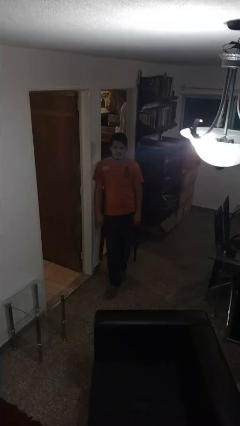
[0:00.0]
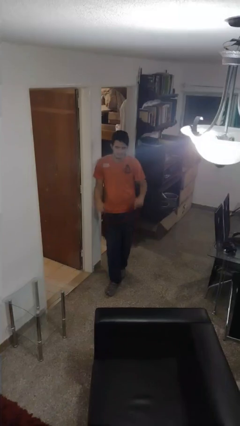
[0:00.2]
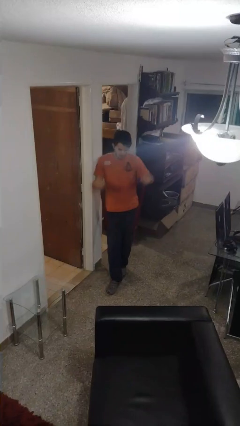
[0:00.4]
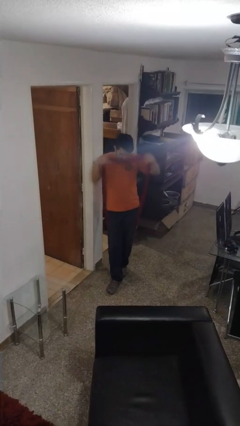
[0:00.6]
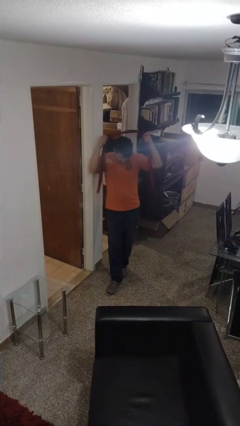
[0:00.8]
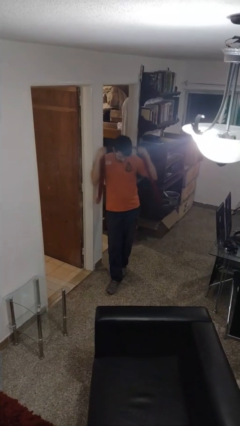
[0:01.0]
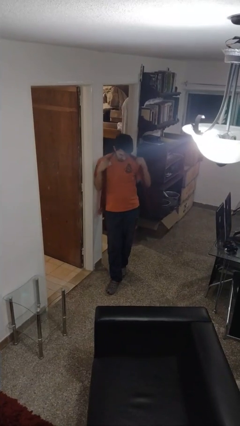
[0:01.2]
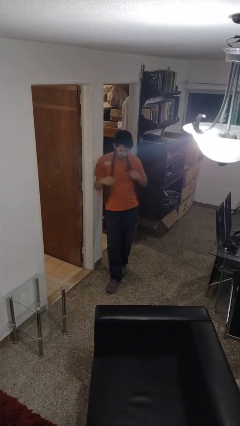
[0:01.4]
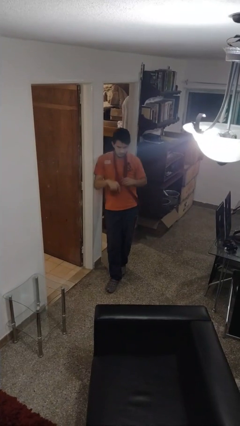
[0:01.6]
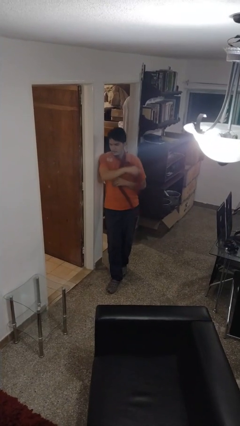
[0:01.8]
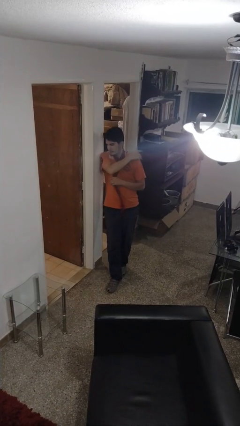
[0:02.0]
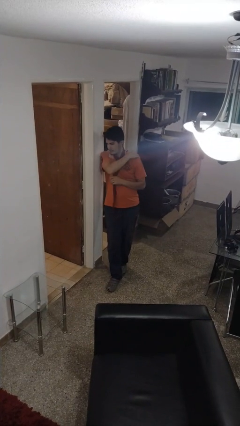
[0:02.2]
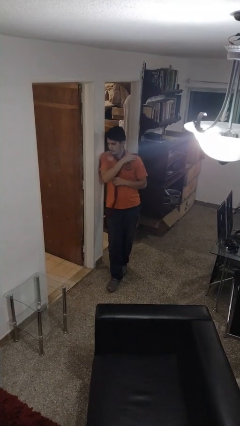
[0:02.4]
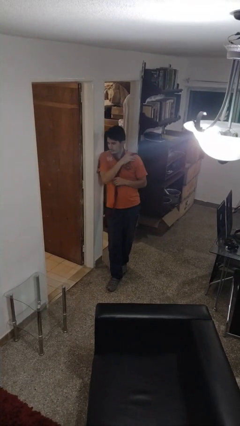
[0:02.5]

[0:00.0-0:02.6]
person puts on scarf

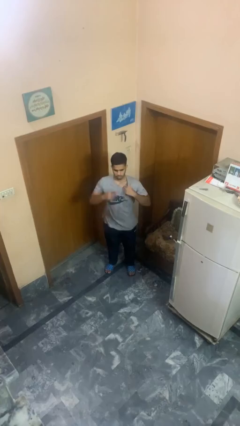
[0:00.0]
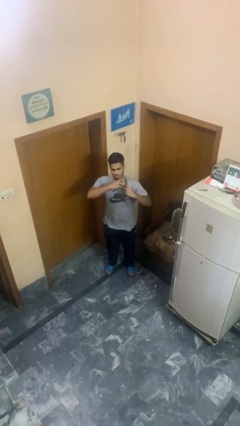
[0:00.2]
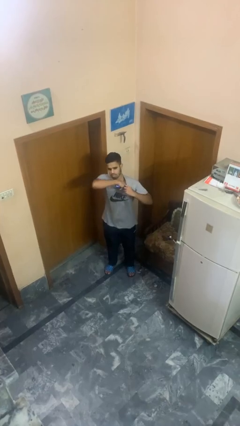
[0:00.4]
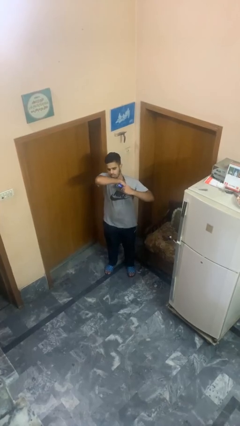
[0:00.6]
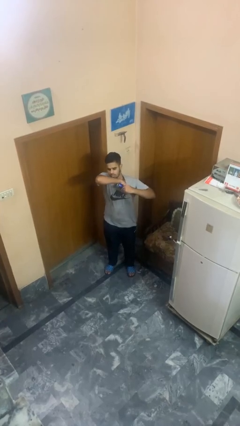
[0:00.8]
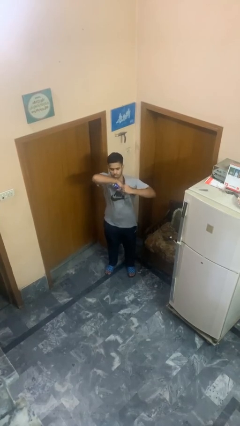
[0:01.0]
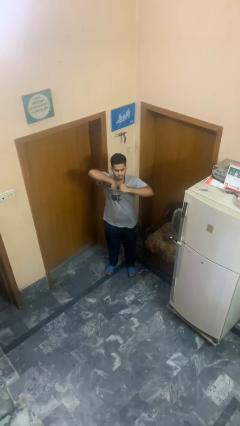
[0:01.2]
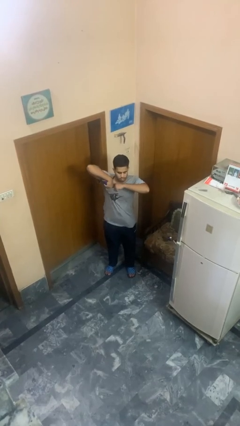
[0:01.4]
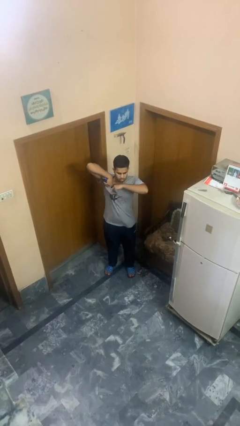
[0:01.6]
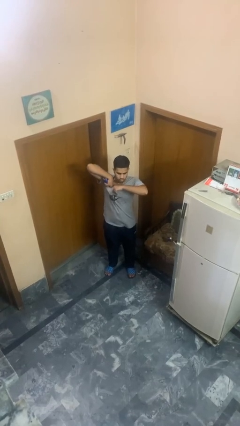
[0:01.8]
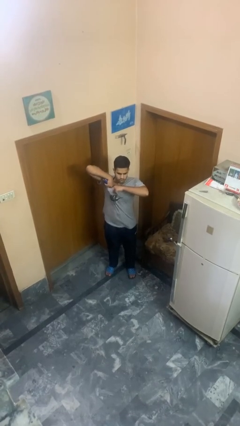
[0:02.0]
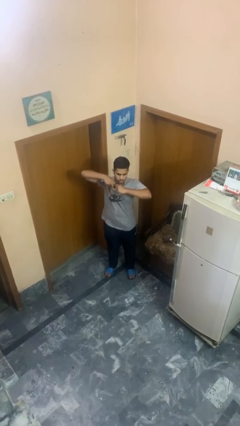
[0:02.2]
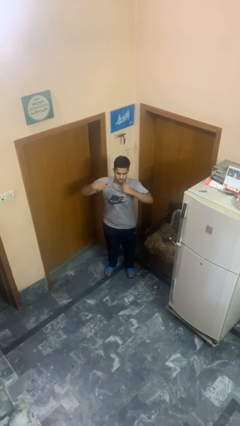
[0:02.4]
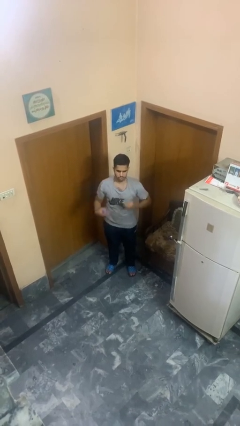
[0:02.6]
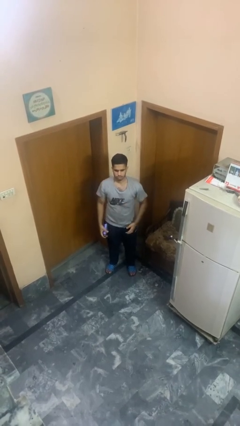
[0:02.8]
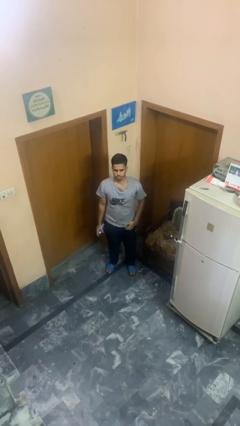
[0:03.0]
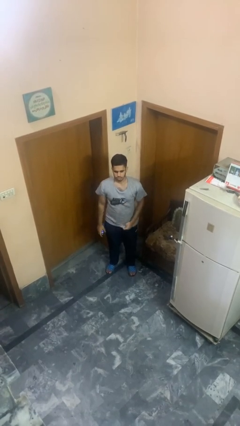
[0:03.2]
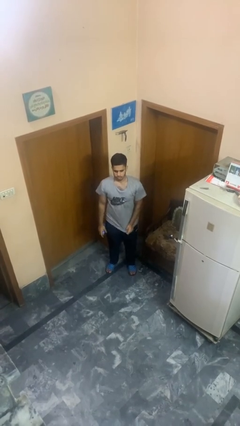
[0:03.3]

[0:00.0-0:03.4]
person applies deodorant

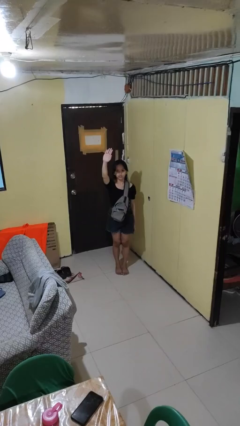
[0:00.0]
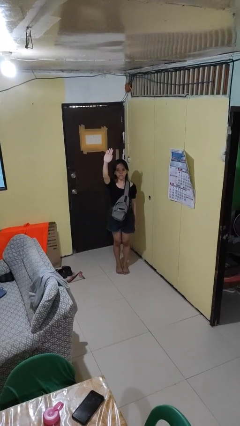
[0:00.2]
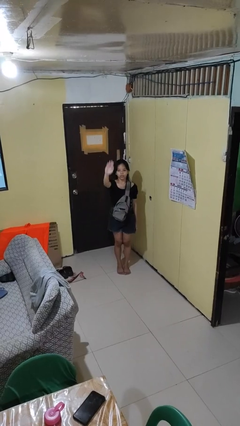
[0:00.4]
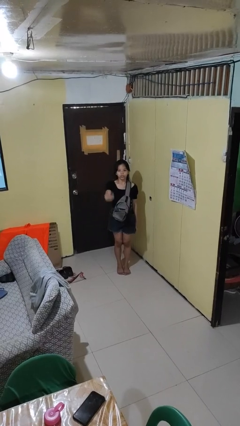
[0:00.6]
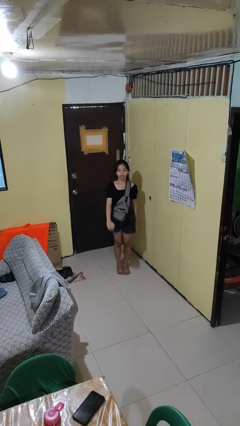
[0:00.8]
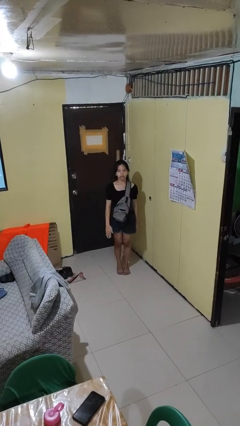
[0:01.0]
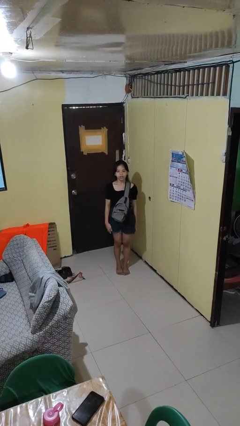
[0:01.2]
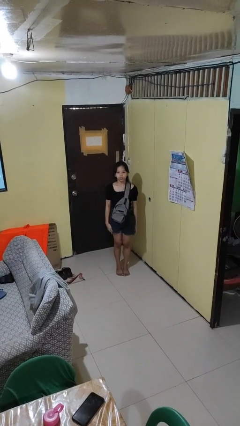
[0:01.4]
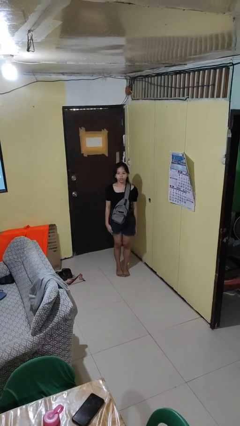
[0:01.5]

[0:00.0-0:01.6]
person gestures swipe down

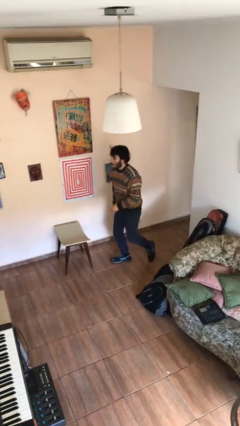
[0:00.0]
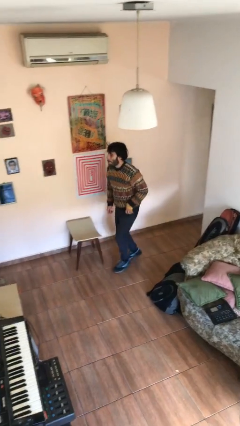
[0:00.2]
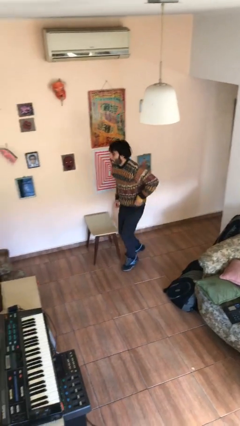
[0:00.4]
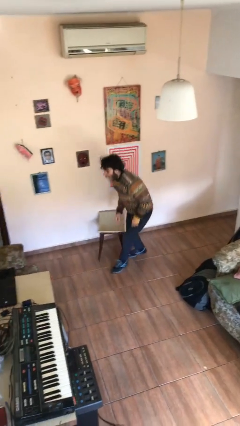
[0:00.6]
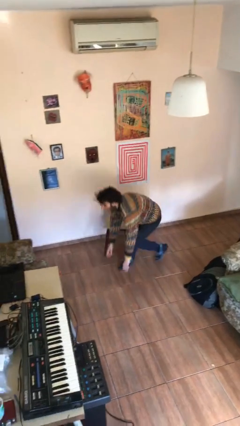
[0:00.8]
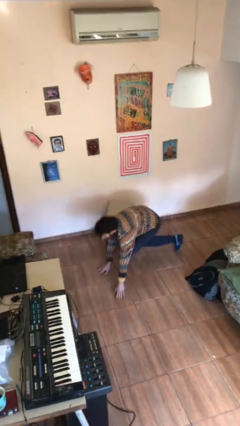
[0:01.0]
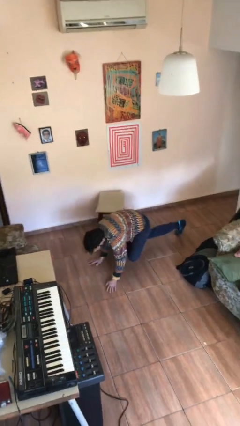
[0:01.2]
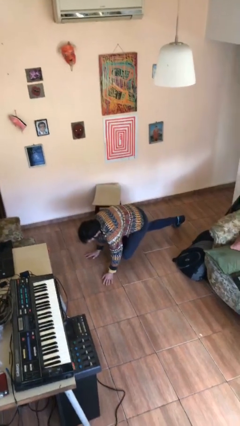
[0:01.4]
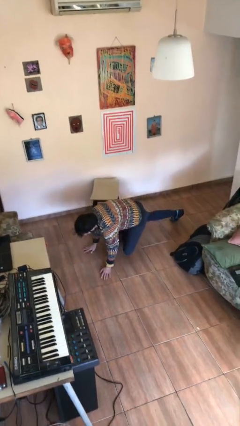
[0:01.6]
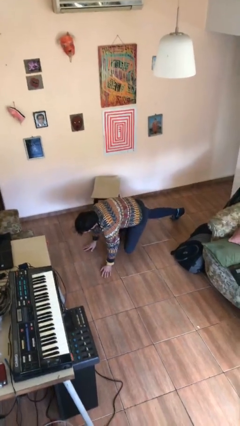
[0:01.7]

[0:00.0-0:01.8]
person trips on object on floor

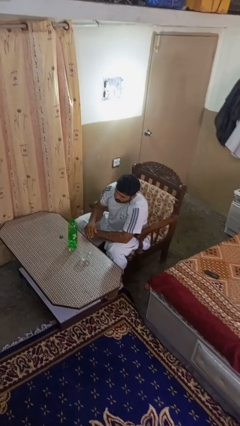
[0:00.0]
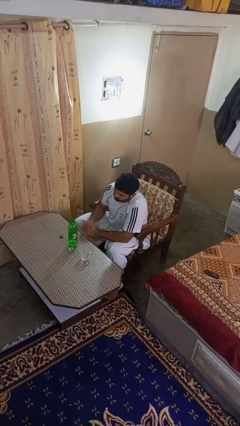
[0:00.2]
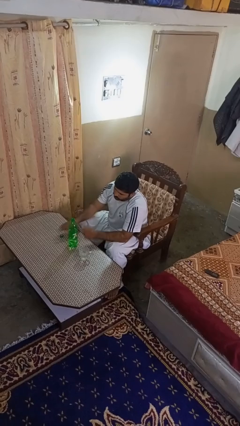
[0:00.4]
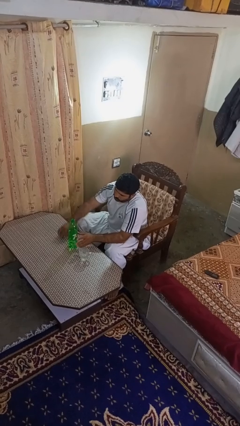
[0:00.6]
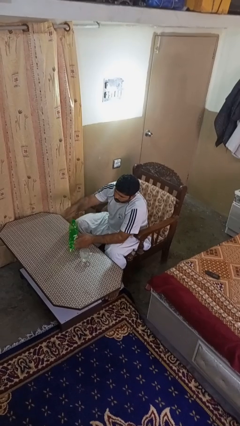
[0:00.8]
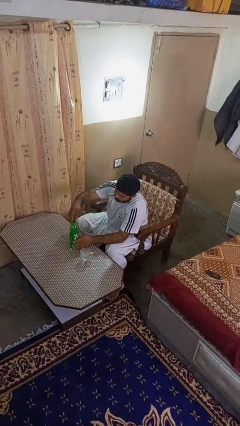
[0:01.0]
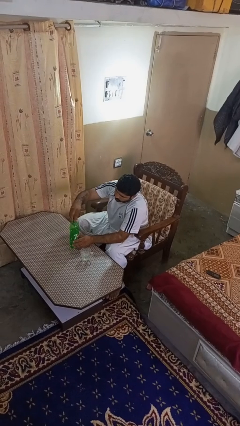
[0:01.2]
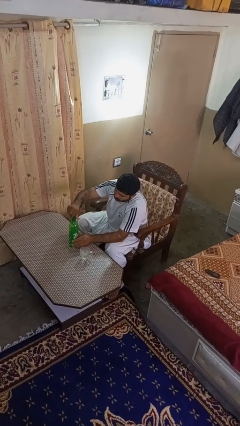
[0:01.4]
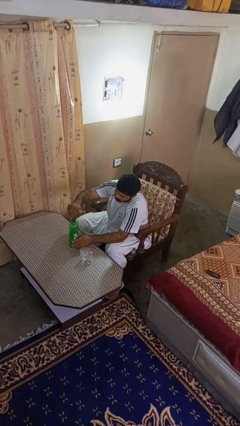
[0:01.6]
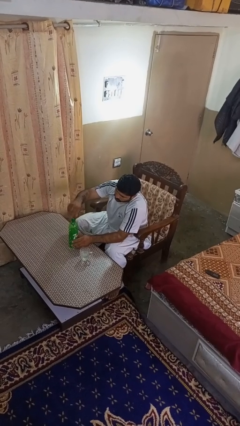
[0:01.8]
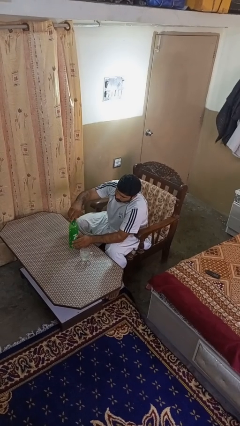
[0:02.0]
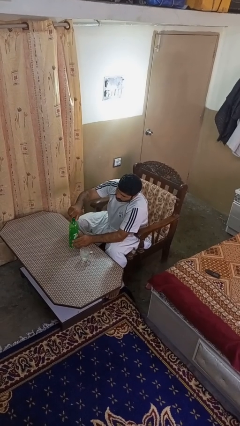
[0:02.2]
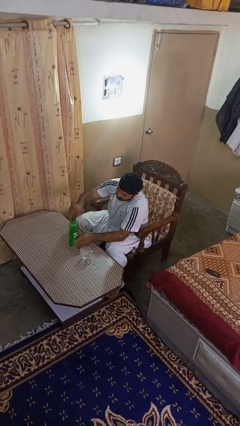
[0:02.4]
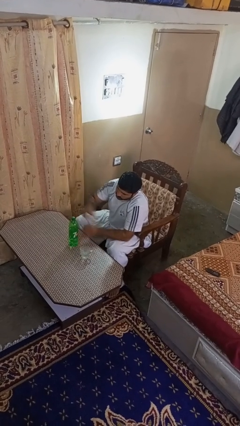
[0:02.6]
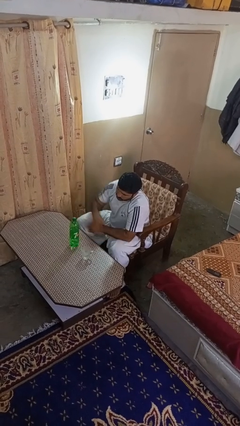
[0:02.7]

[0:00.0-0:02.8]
person screws lid to bottle

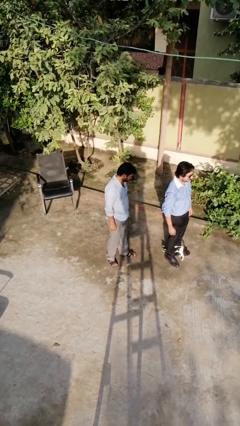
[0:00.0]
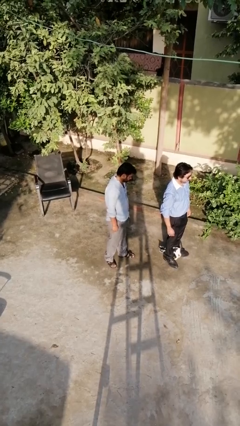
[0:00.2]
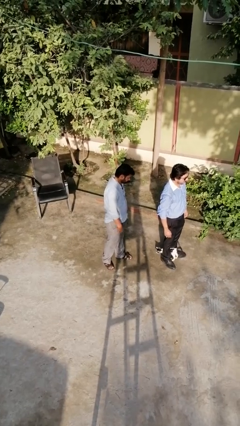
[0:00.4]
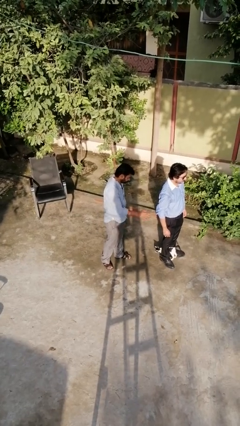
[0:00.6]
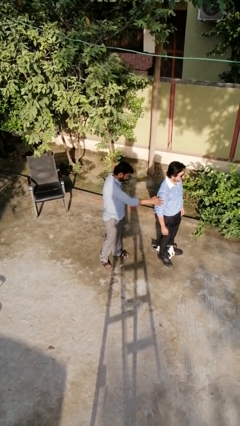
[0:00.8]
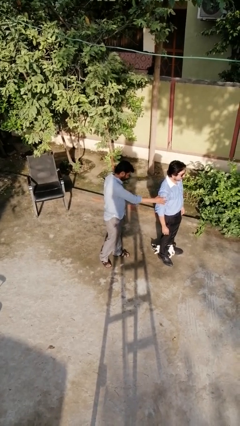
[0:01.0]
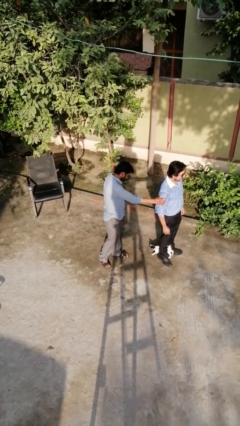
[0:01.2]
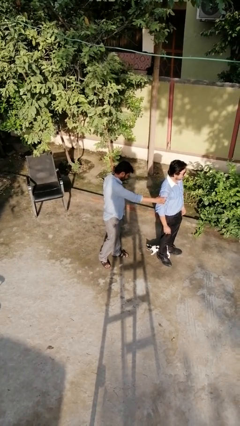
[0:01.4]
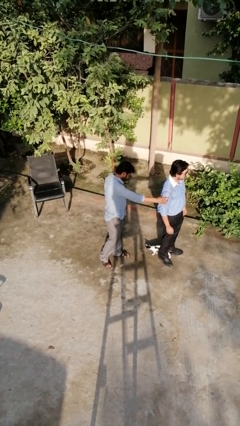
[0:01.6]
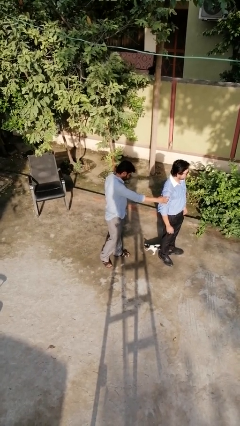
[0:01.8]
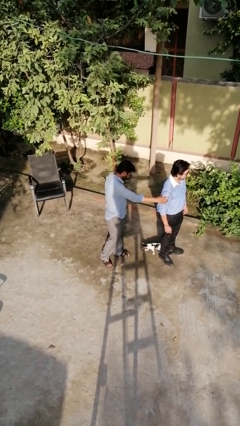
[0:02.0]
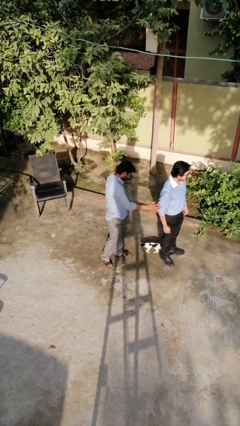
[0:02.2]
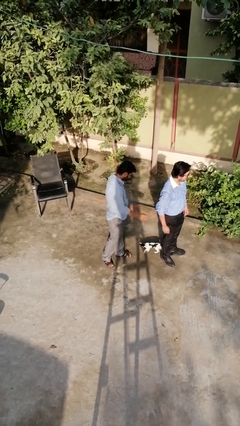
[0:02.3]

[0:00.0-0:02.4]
person grabs person by bicep

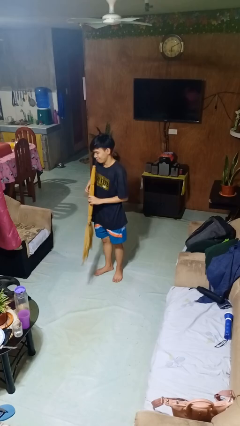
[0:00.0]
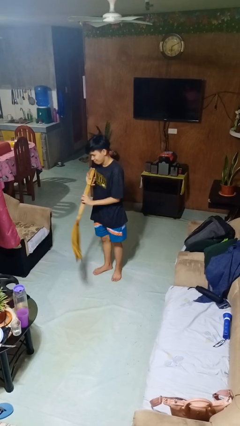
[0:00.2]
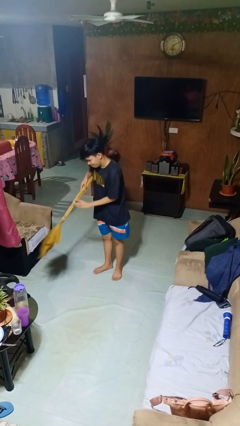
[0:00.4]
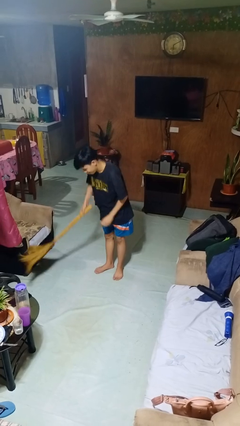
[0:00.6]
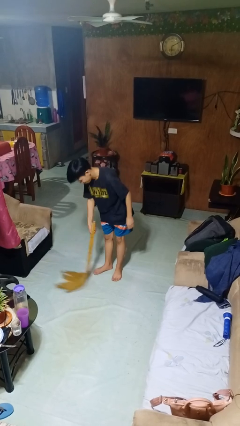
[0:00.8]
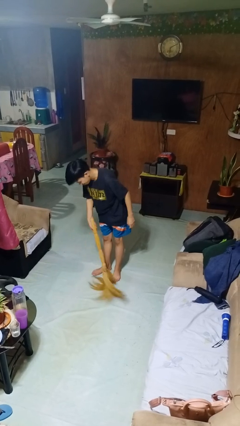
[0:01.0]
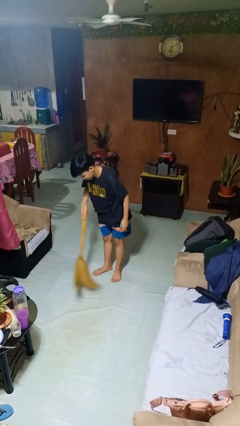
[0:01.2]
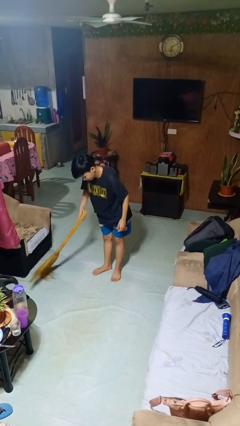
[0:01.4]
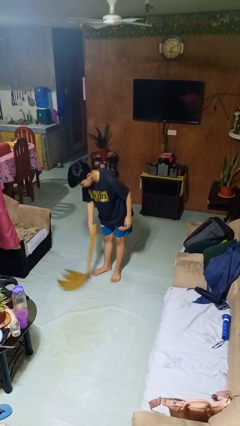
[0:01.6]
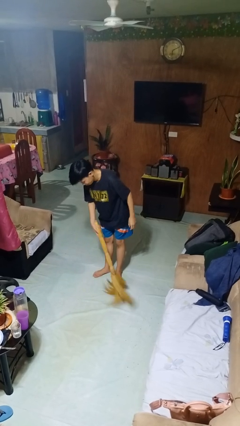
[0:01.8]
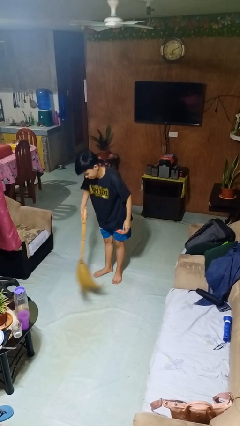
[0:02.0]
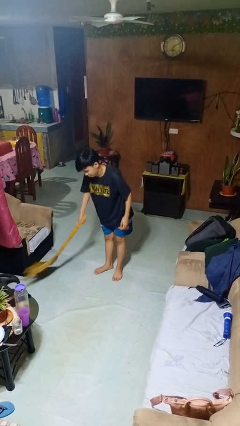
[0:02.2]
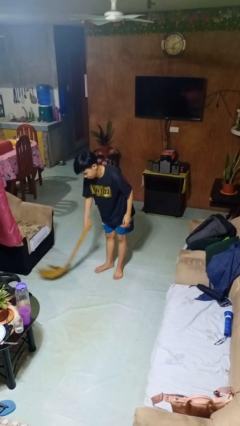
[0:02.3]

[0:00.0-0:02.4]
person sweeps floor
